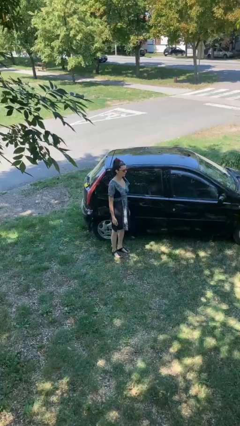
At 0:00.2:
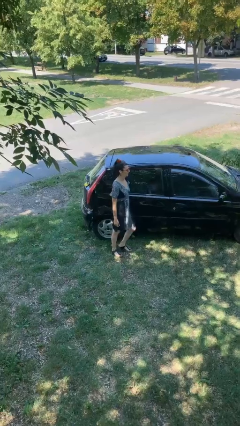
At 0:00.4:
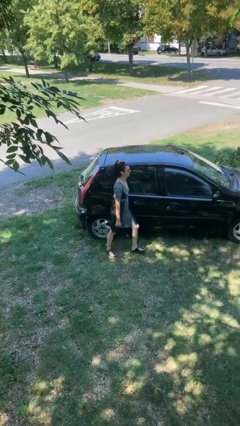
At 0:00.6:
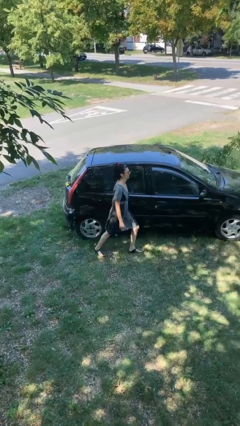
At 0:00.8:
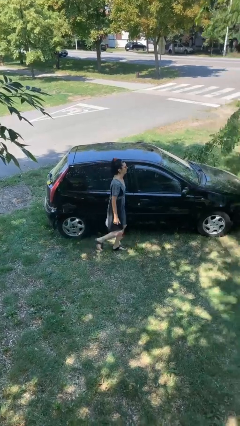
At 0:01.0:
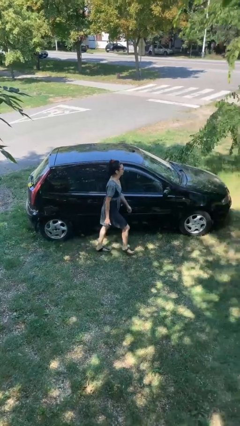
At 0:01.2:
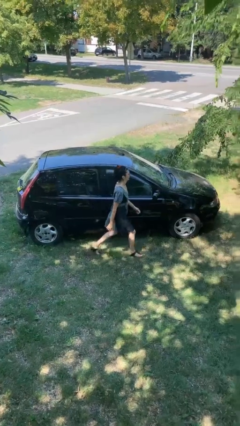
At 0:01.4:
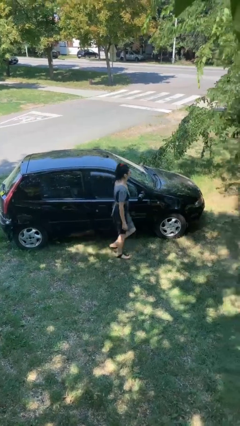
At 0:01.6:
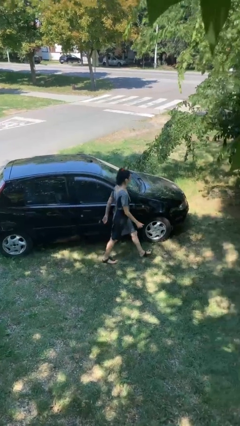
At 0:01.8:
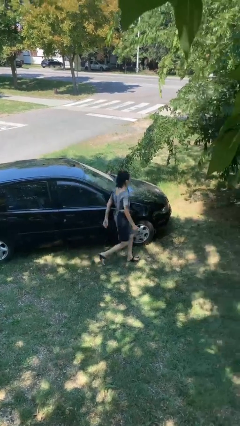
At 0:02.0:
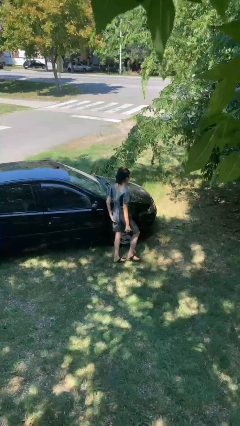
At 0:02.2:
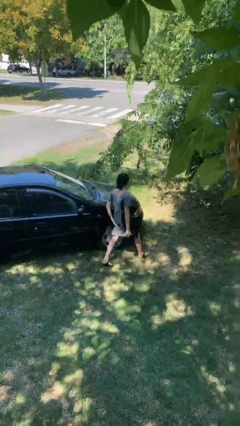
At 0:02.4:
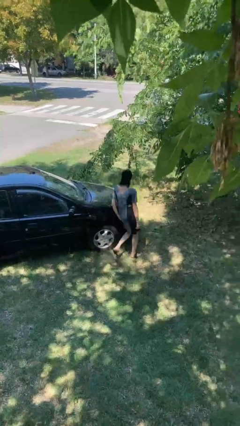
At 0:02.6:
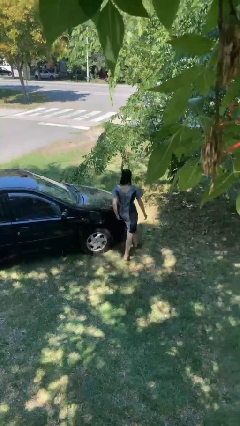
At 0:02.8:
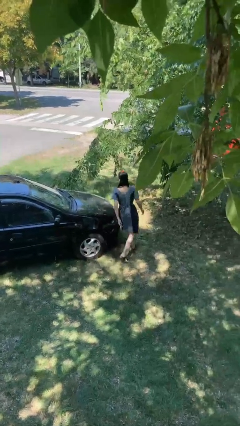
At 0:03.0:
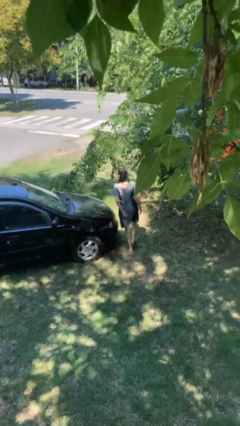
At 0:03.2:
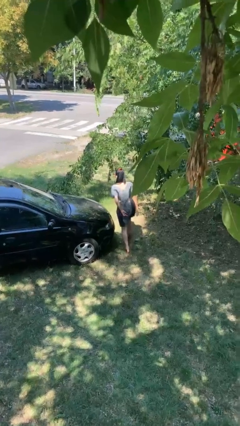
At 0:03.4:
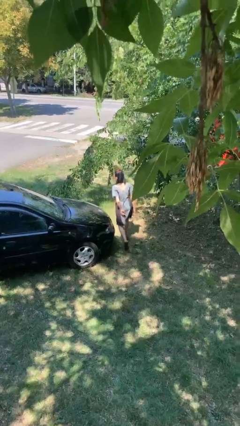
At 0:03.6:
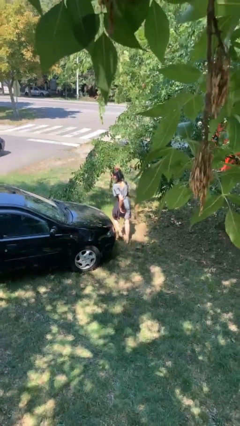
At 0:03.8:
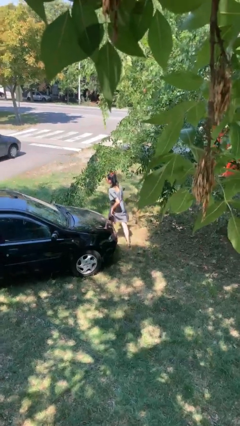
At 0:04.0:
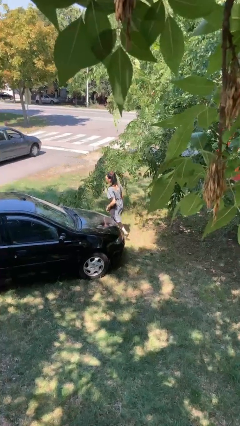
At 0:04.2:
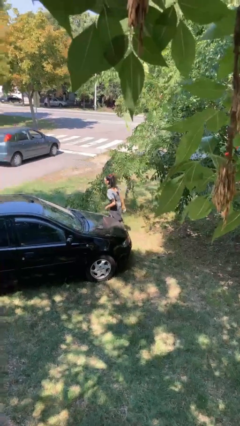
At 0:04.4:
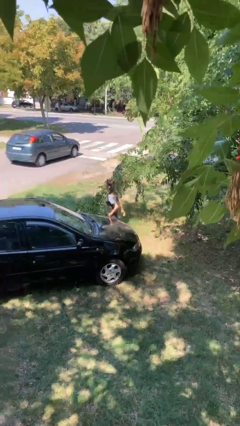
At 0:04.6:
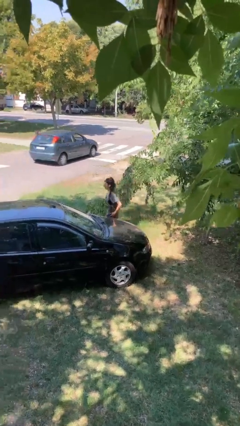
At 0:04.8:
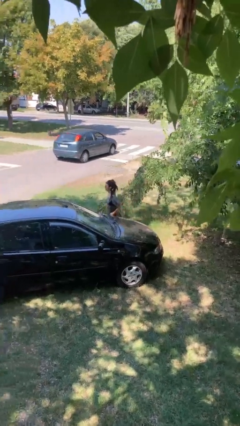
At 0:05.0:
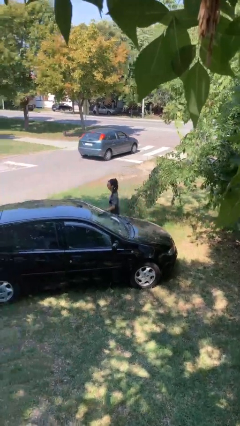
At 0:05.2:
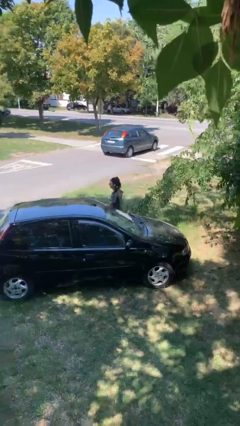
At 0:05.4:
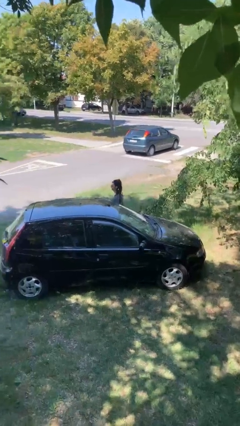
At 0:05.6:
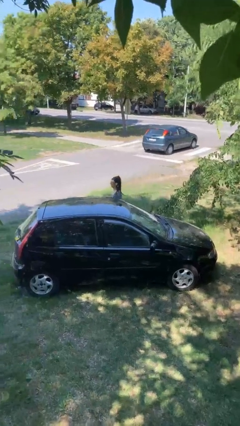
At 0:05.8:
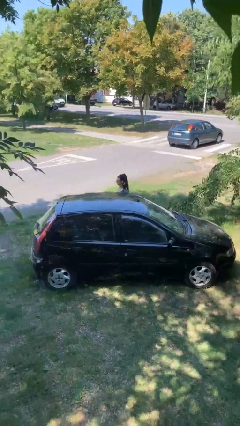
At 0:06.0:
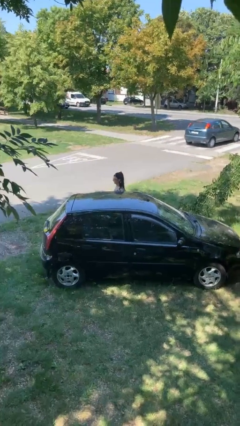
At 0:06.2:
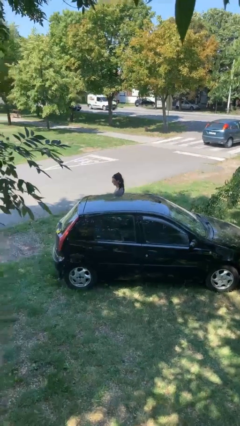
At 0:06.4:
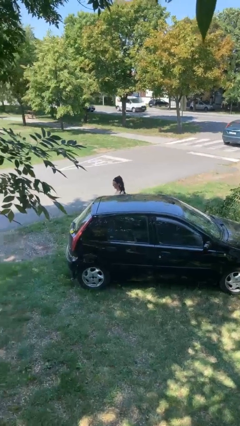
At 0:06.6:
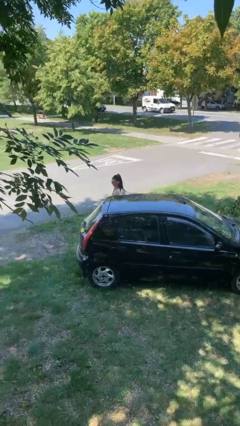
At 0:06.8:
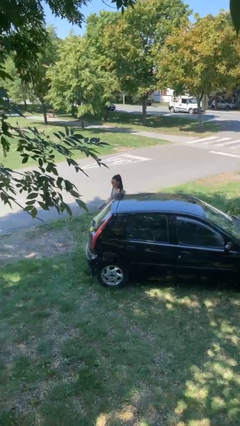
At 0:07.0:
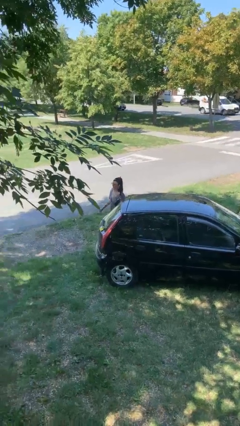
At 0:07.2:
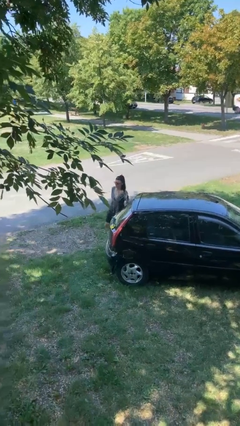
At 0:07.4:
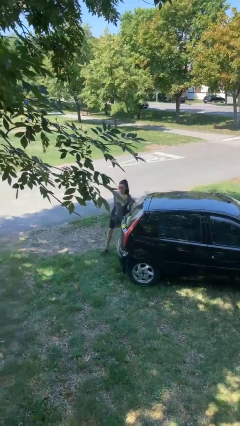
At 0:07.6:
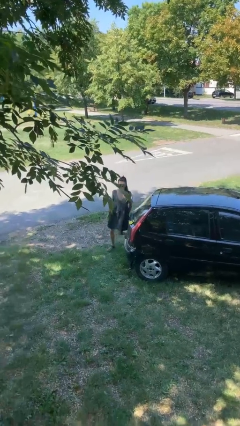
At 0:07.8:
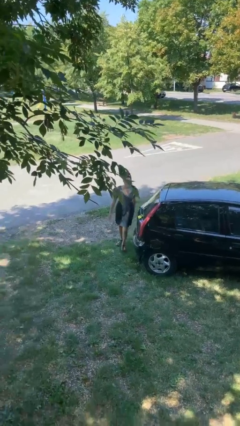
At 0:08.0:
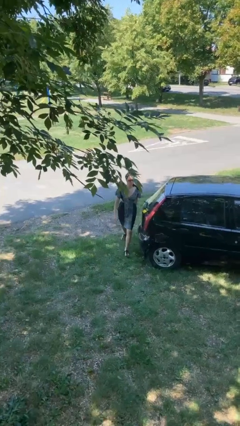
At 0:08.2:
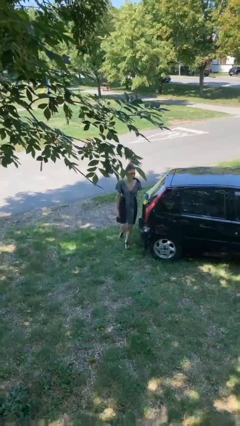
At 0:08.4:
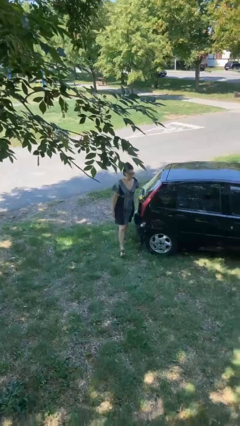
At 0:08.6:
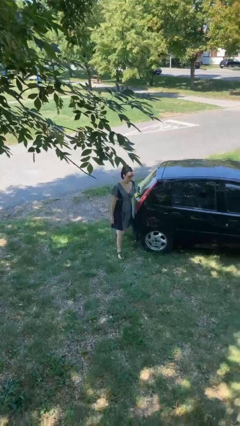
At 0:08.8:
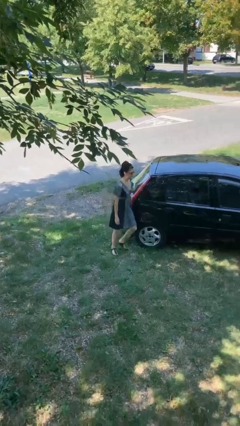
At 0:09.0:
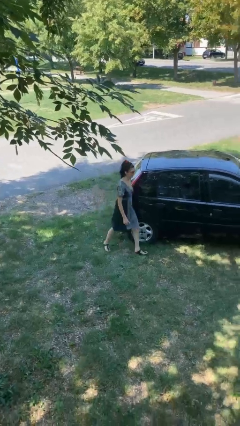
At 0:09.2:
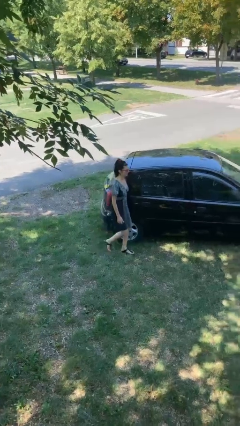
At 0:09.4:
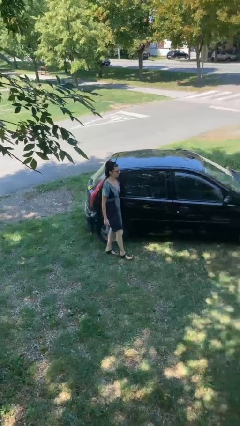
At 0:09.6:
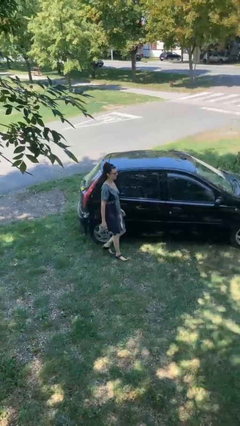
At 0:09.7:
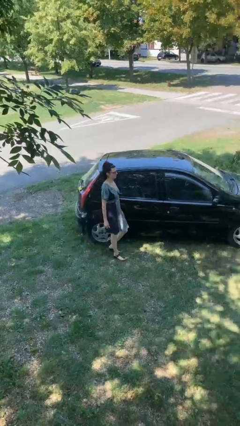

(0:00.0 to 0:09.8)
person walks around car

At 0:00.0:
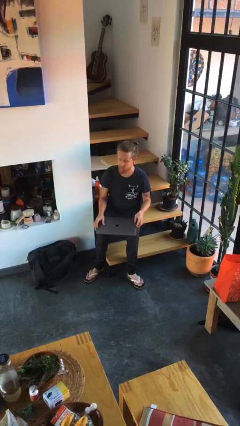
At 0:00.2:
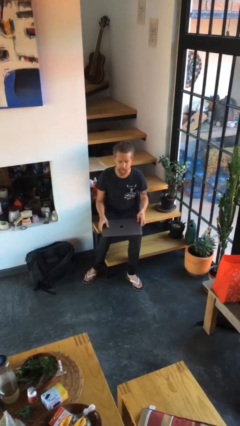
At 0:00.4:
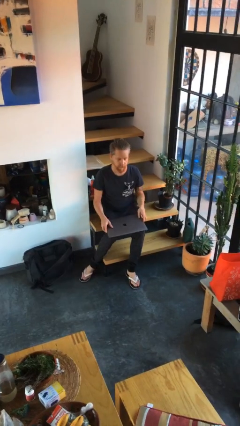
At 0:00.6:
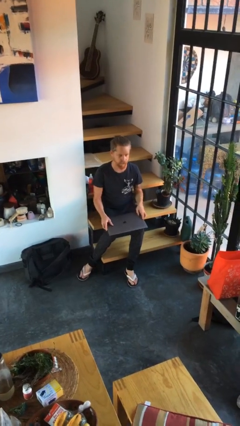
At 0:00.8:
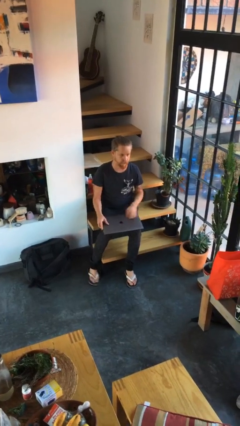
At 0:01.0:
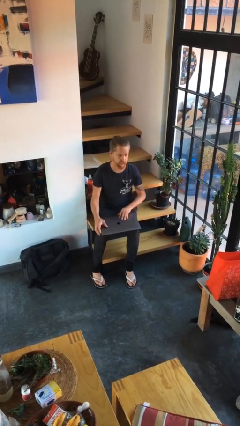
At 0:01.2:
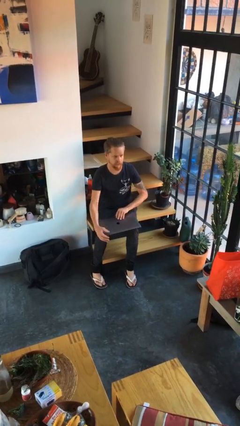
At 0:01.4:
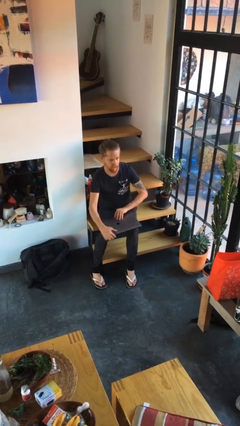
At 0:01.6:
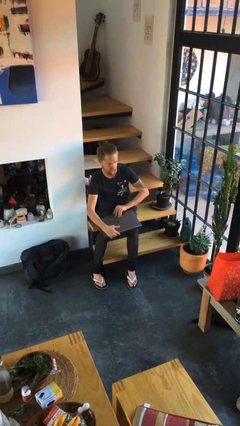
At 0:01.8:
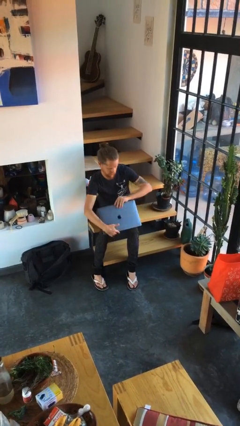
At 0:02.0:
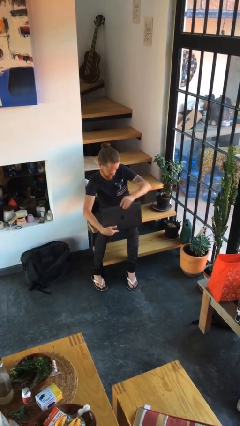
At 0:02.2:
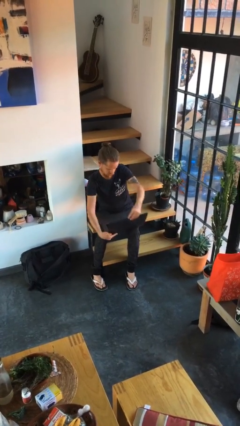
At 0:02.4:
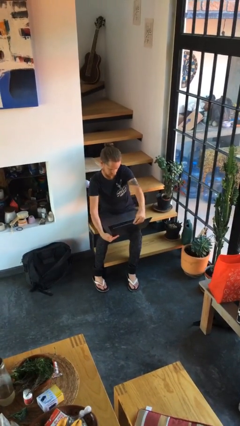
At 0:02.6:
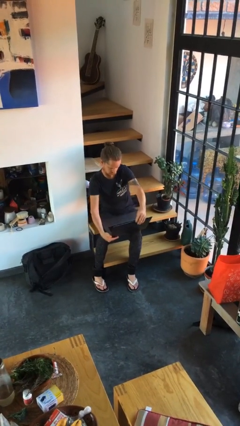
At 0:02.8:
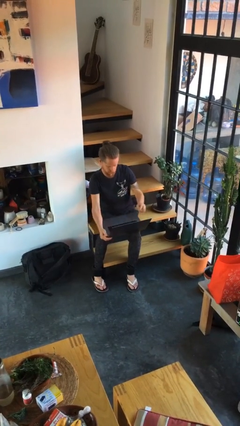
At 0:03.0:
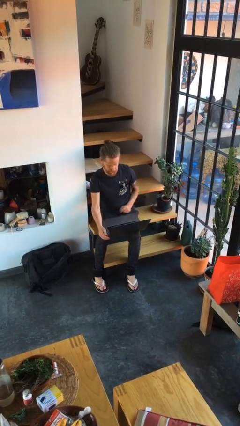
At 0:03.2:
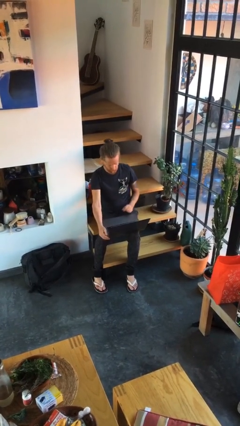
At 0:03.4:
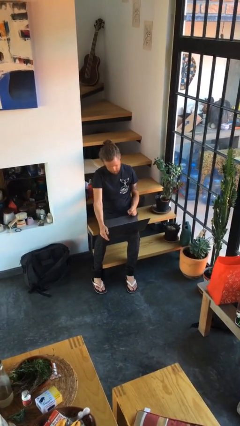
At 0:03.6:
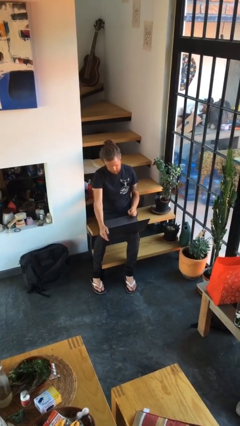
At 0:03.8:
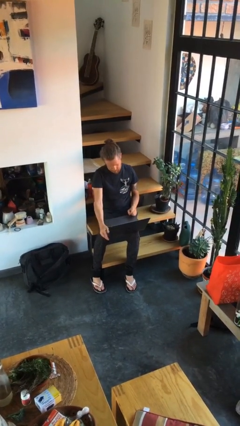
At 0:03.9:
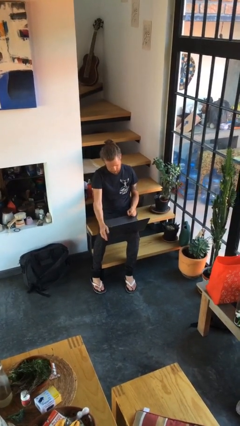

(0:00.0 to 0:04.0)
person opens laptop

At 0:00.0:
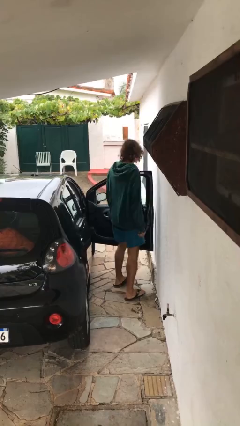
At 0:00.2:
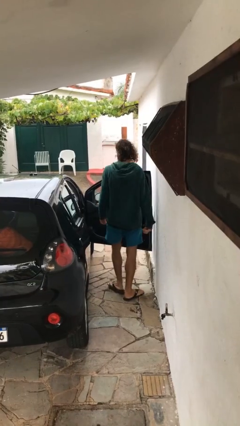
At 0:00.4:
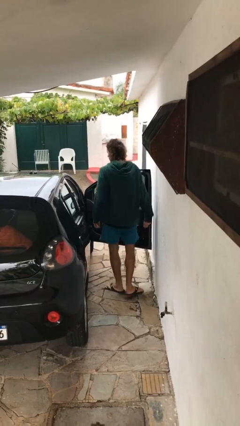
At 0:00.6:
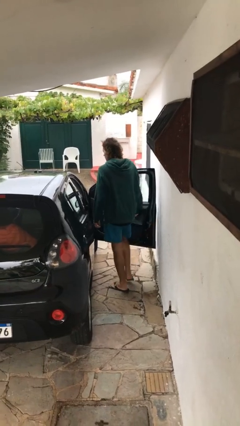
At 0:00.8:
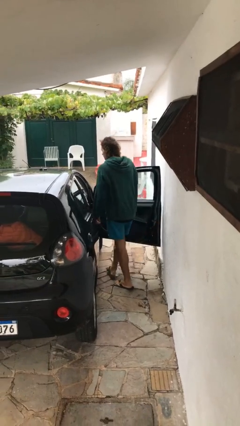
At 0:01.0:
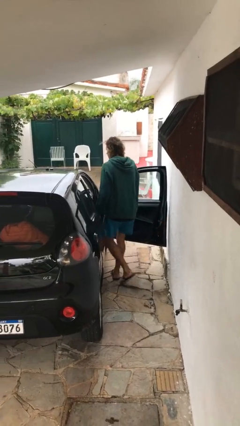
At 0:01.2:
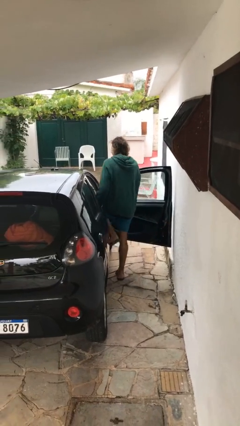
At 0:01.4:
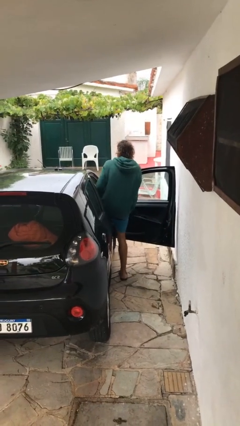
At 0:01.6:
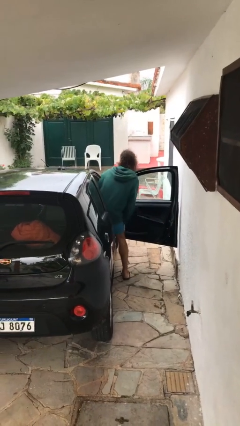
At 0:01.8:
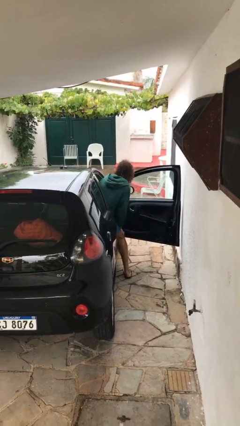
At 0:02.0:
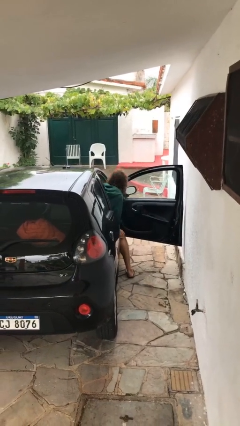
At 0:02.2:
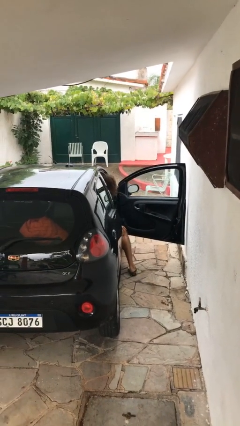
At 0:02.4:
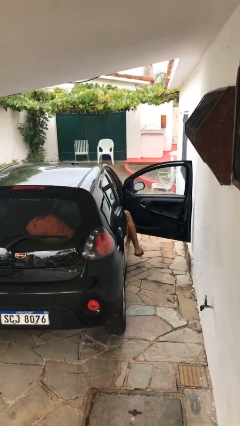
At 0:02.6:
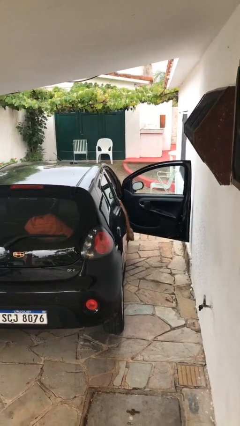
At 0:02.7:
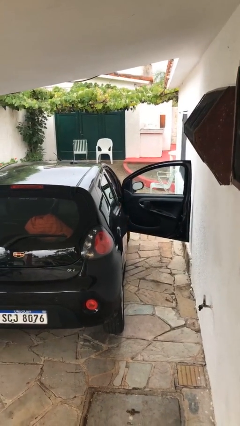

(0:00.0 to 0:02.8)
person enters car

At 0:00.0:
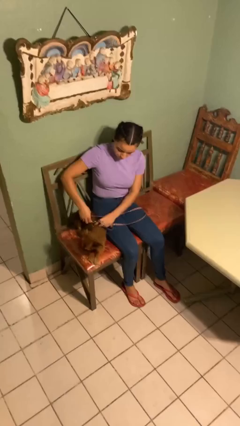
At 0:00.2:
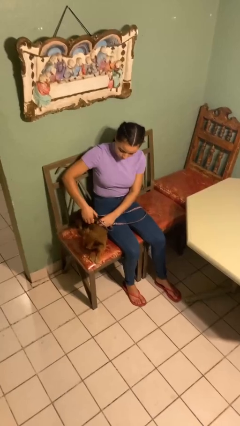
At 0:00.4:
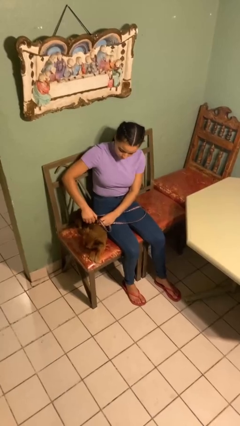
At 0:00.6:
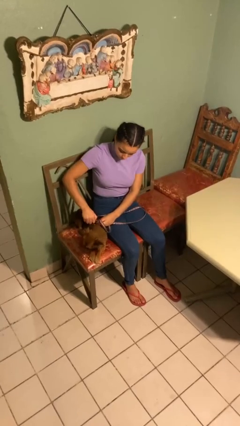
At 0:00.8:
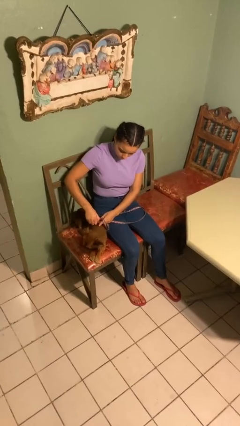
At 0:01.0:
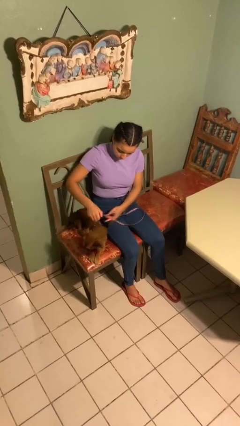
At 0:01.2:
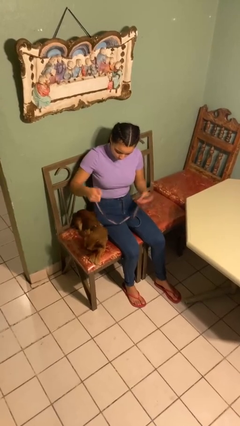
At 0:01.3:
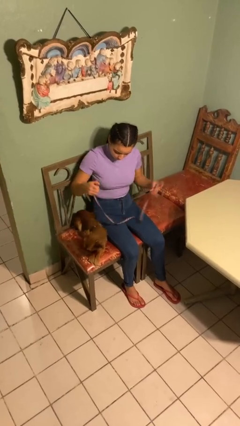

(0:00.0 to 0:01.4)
person unattaches leash from dog
